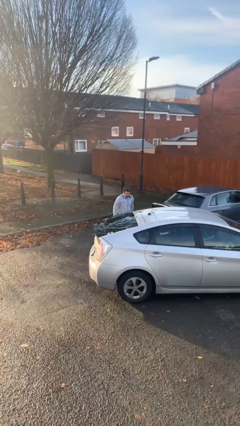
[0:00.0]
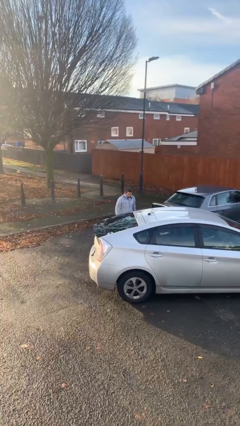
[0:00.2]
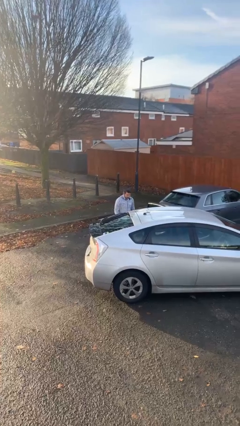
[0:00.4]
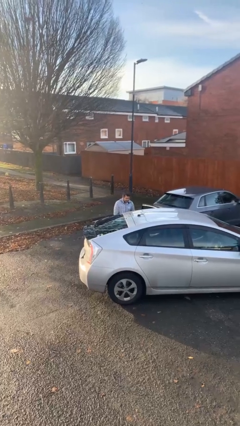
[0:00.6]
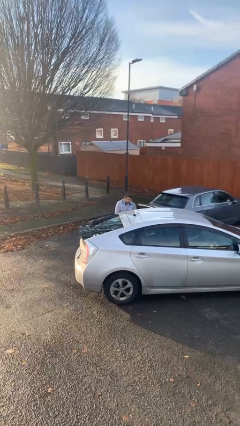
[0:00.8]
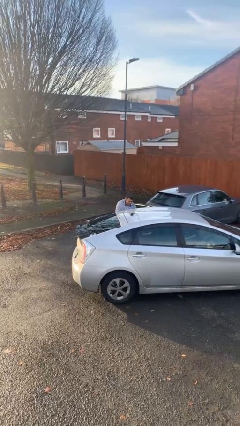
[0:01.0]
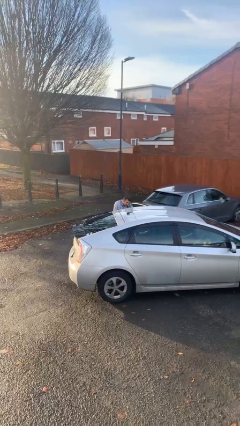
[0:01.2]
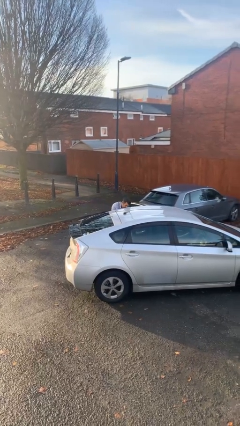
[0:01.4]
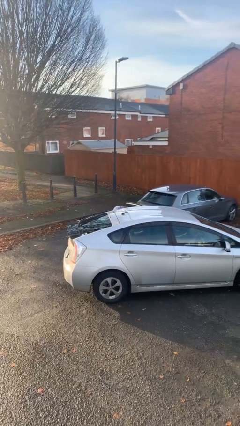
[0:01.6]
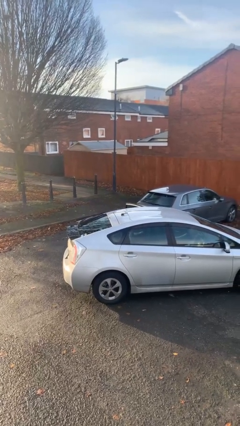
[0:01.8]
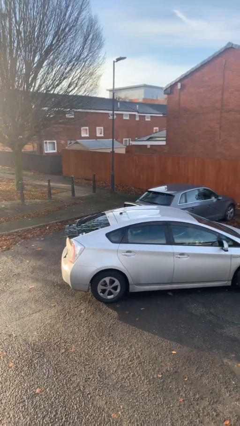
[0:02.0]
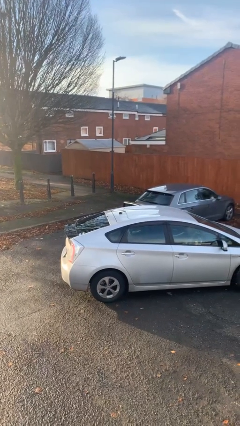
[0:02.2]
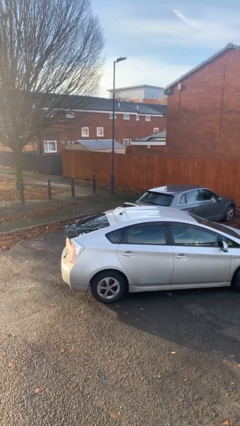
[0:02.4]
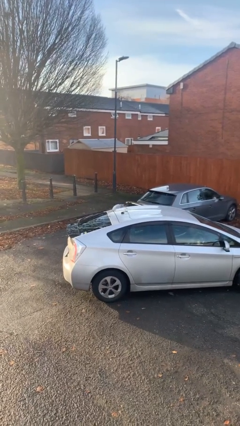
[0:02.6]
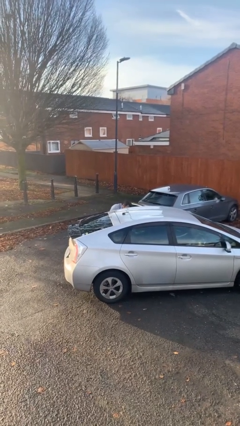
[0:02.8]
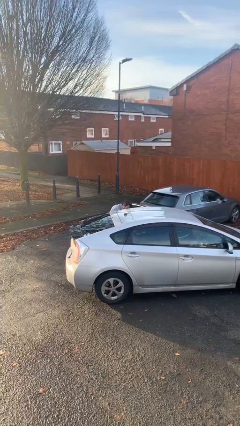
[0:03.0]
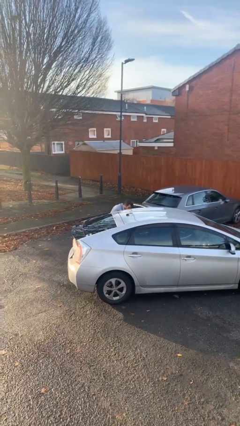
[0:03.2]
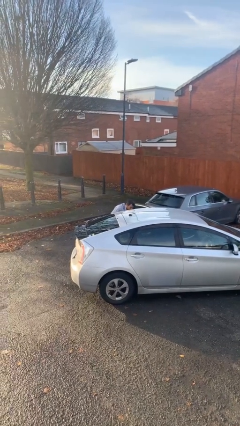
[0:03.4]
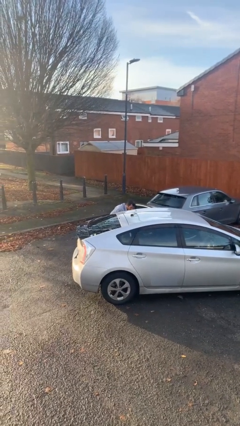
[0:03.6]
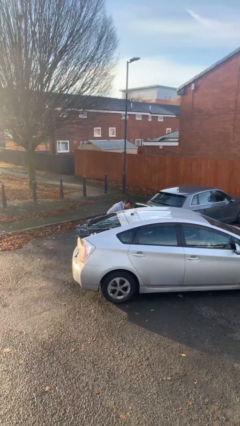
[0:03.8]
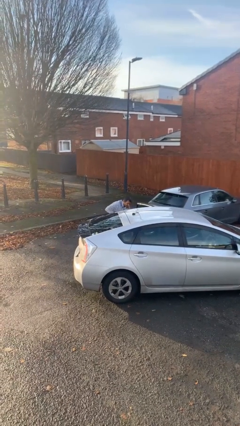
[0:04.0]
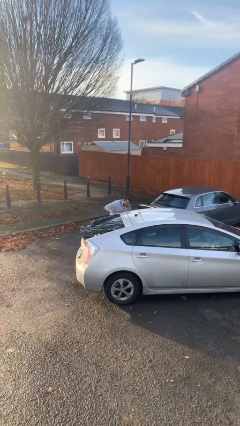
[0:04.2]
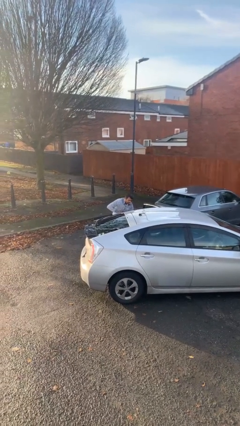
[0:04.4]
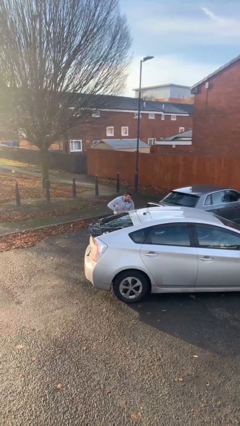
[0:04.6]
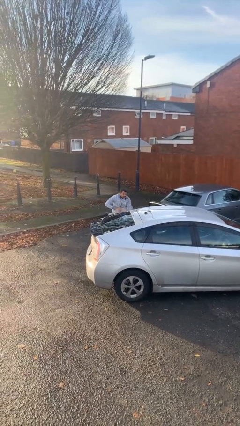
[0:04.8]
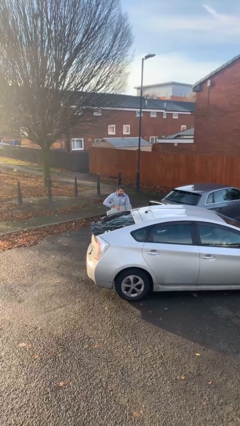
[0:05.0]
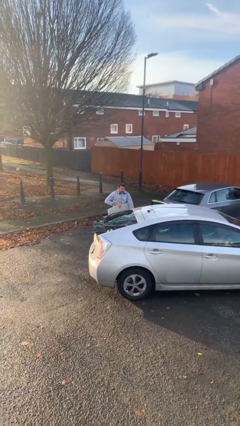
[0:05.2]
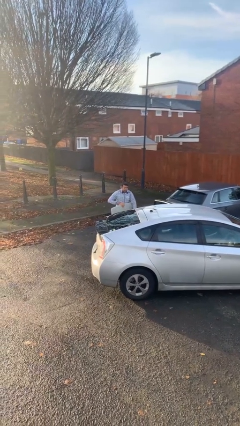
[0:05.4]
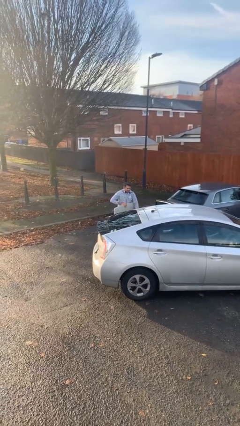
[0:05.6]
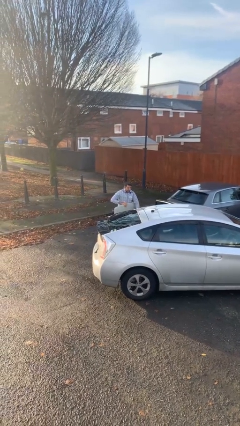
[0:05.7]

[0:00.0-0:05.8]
person unloads car

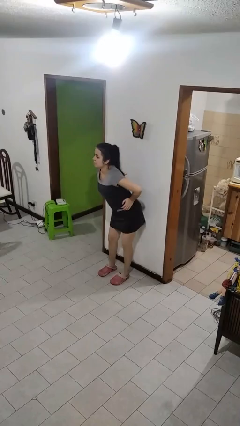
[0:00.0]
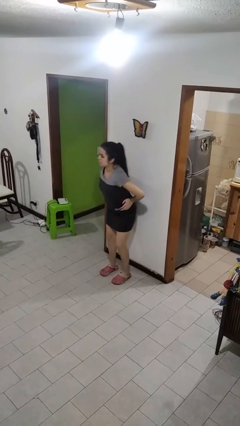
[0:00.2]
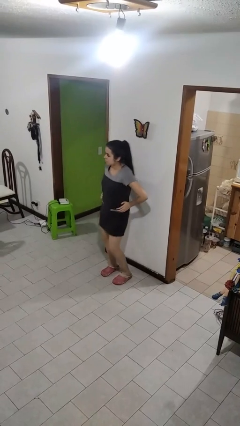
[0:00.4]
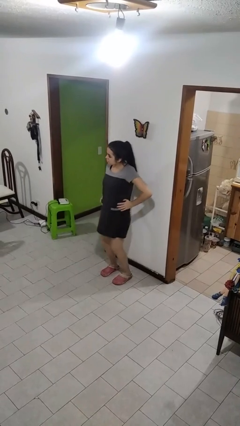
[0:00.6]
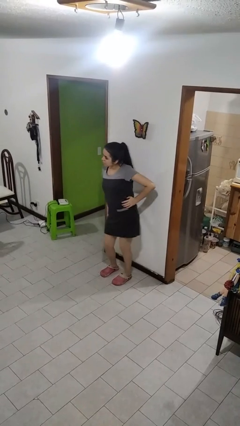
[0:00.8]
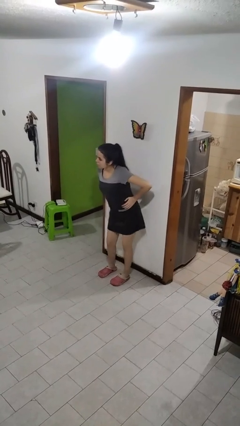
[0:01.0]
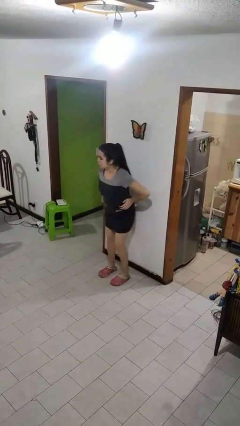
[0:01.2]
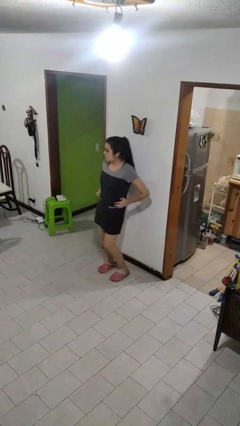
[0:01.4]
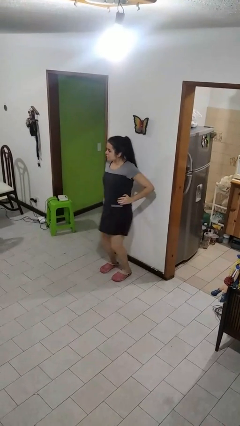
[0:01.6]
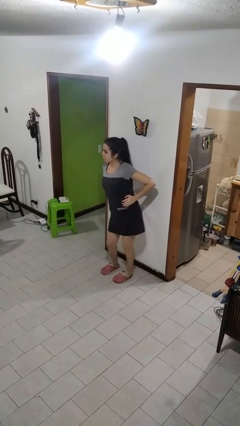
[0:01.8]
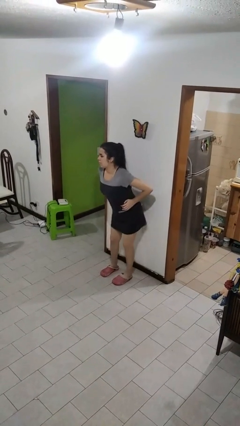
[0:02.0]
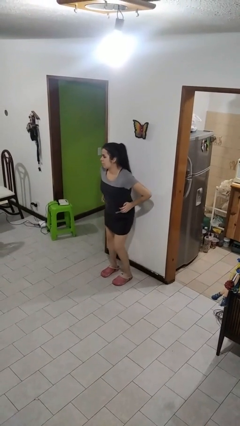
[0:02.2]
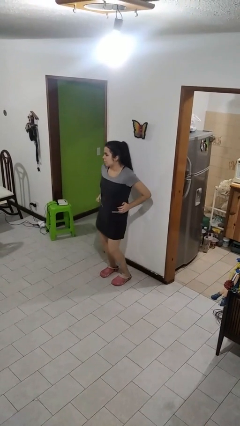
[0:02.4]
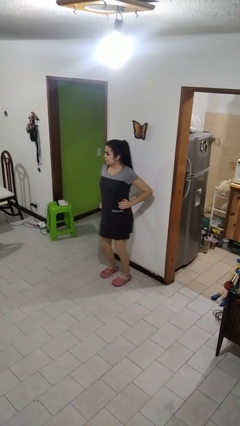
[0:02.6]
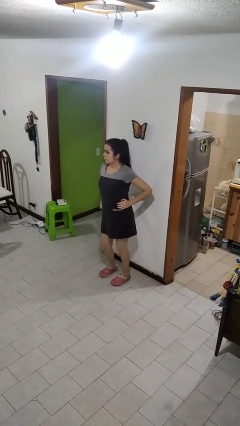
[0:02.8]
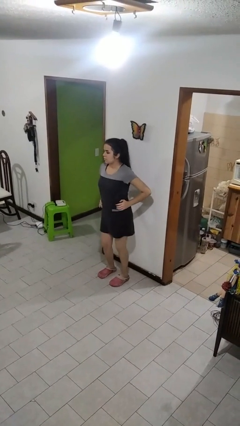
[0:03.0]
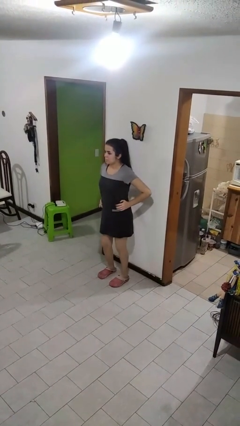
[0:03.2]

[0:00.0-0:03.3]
person wiggles hips

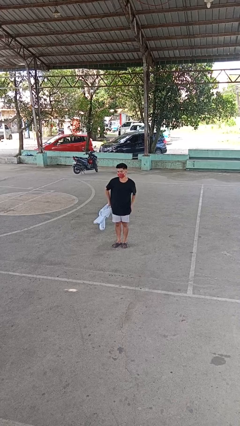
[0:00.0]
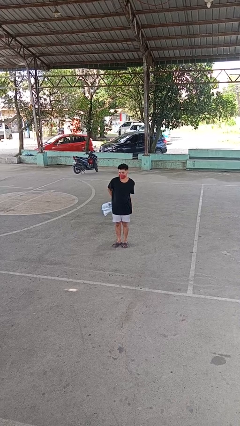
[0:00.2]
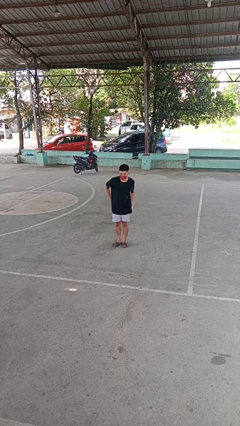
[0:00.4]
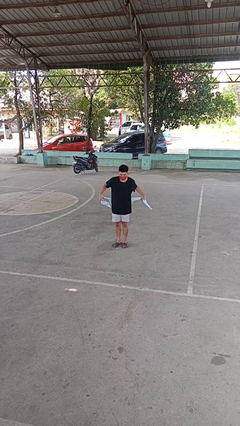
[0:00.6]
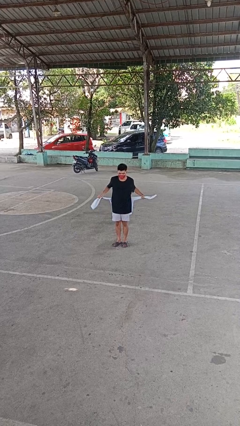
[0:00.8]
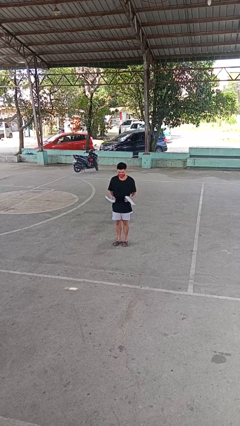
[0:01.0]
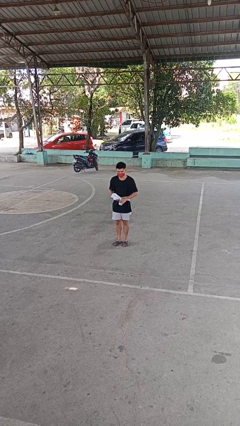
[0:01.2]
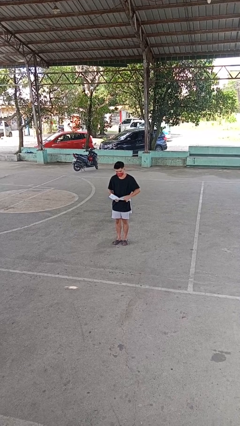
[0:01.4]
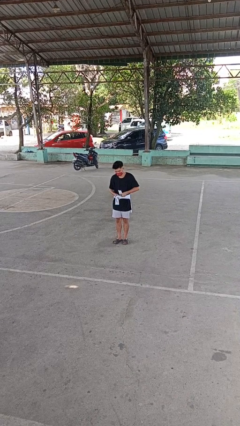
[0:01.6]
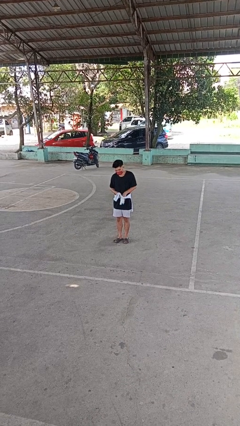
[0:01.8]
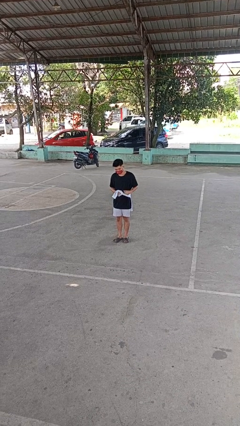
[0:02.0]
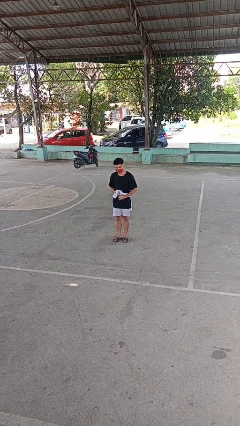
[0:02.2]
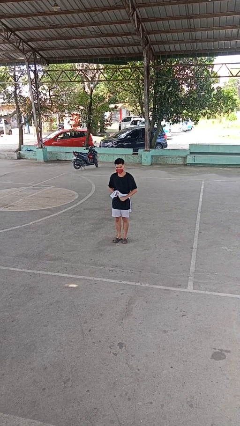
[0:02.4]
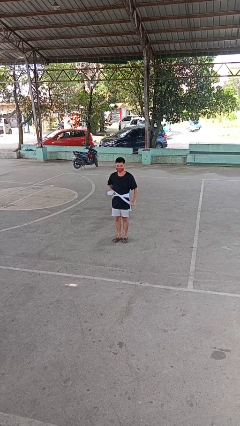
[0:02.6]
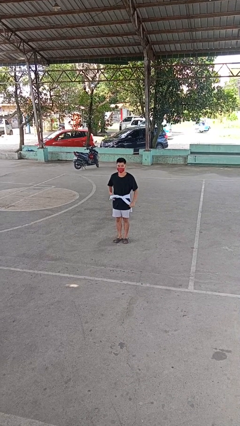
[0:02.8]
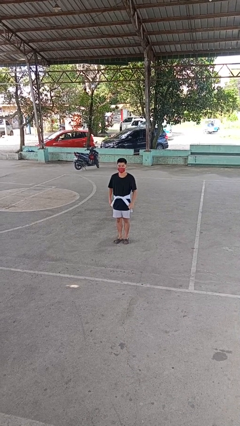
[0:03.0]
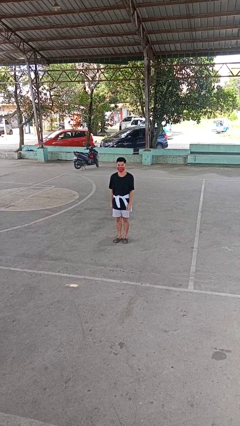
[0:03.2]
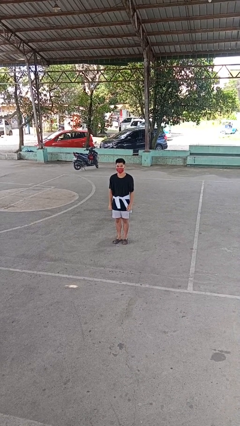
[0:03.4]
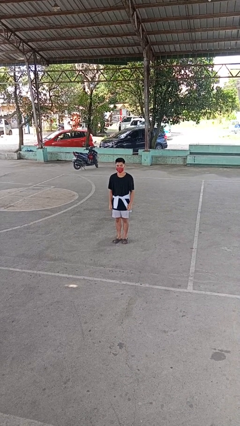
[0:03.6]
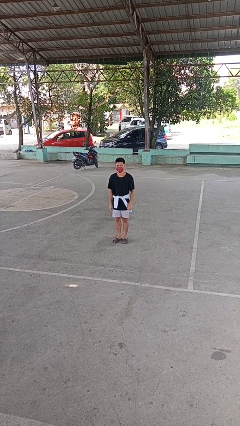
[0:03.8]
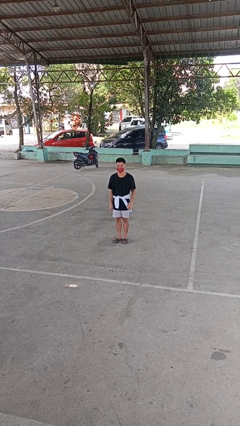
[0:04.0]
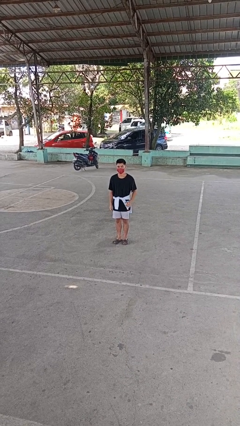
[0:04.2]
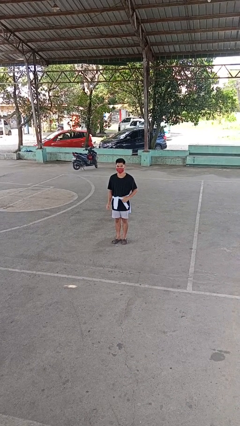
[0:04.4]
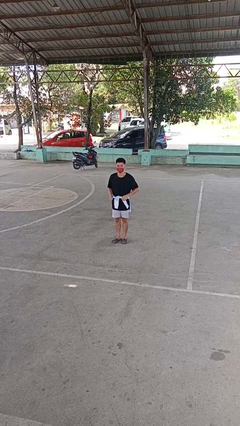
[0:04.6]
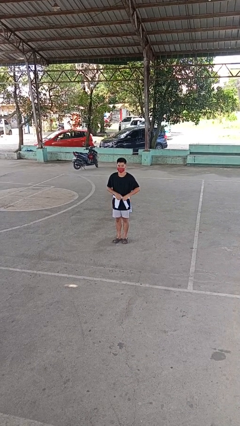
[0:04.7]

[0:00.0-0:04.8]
person ties jacket around waist

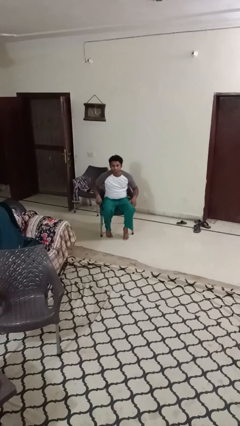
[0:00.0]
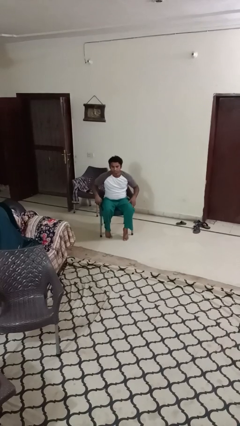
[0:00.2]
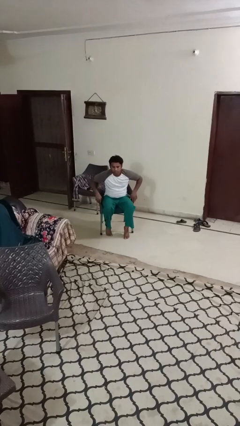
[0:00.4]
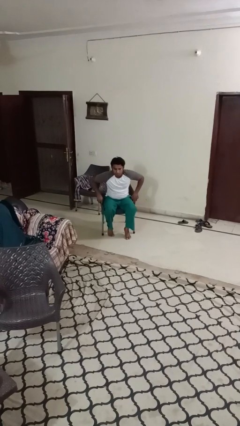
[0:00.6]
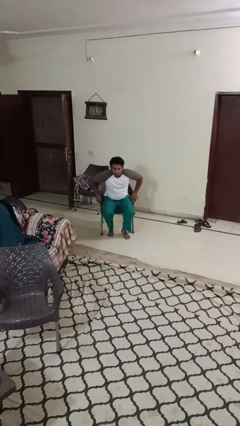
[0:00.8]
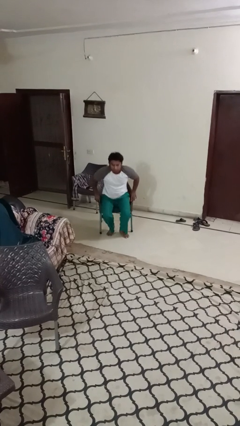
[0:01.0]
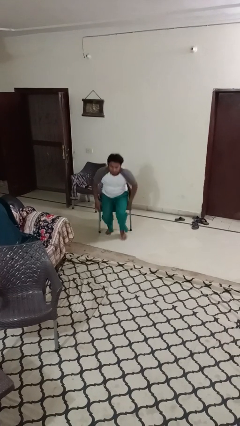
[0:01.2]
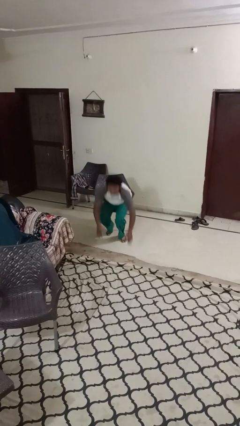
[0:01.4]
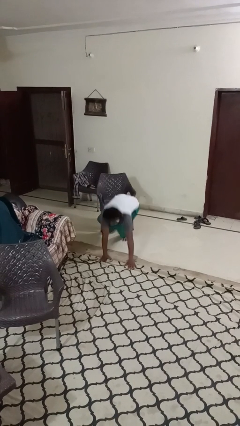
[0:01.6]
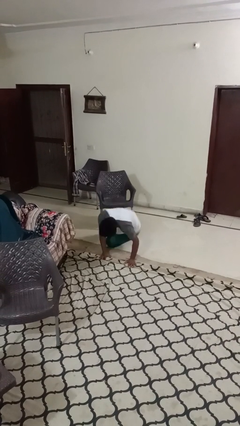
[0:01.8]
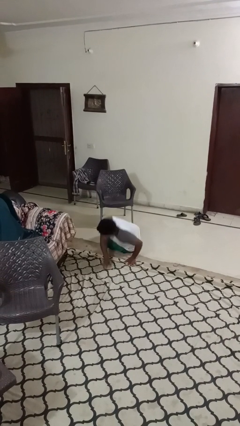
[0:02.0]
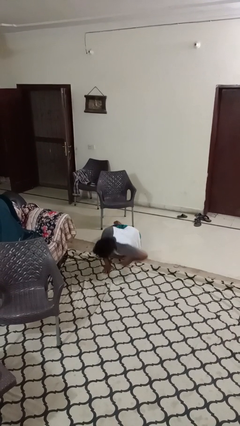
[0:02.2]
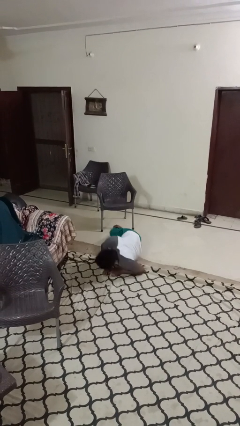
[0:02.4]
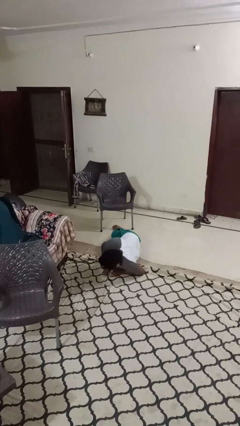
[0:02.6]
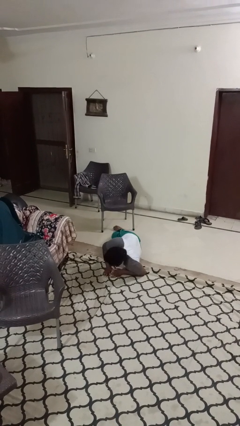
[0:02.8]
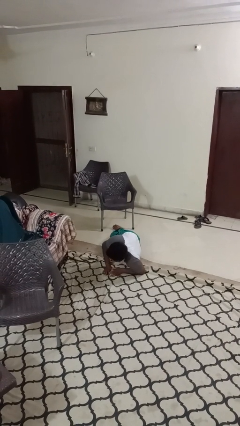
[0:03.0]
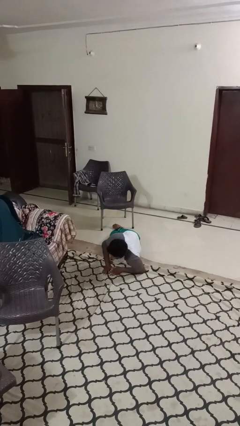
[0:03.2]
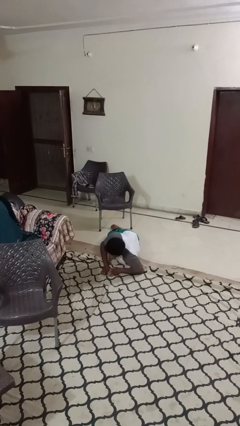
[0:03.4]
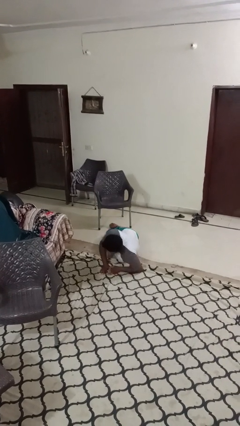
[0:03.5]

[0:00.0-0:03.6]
person falls from chair

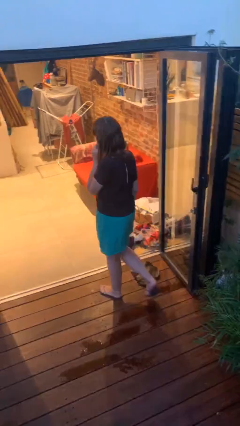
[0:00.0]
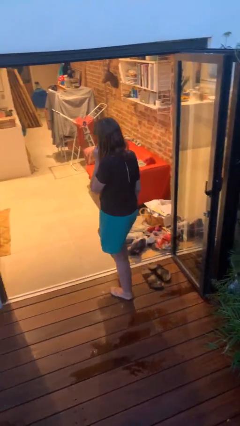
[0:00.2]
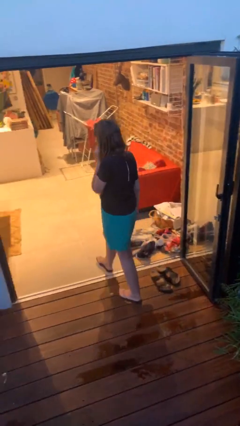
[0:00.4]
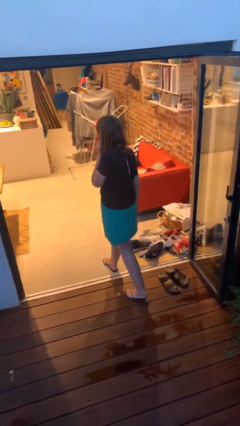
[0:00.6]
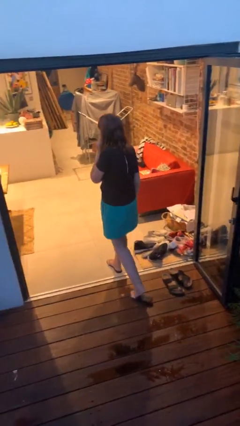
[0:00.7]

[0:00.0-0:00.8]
person exits scene through structure
